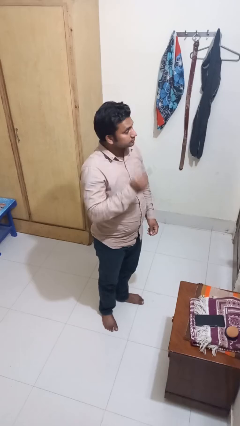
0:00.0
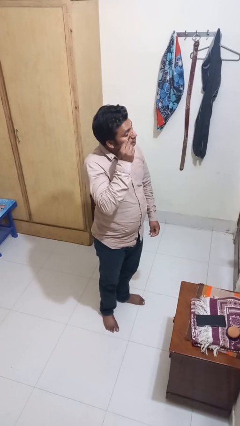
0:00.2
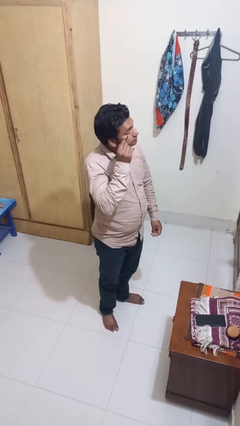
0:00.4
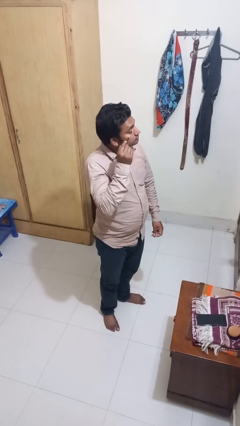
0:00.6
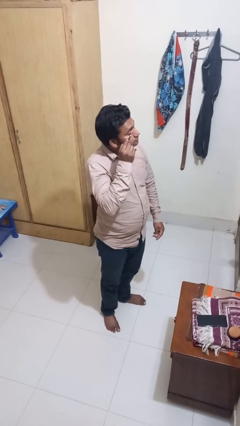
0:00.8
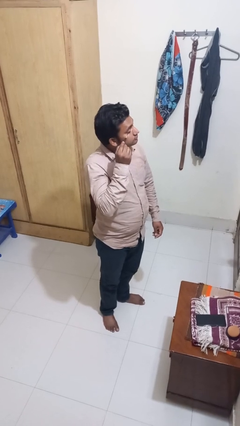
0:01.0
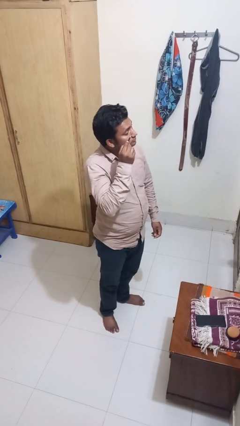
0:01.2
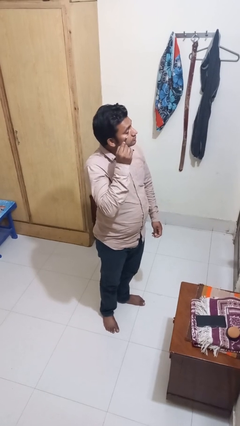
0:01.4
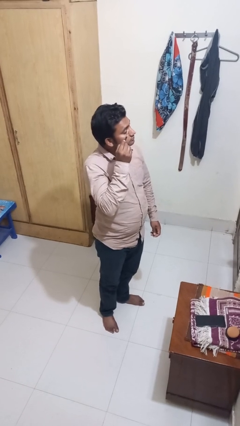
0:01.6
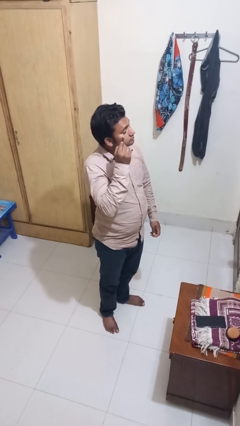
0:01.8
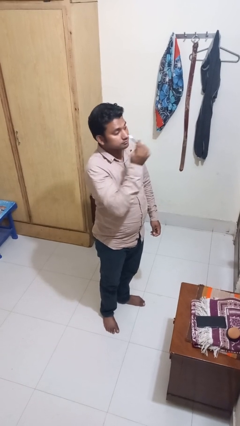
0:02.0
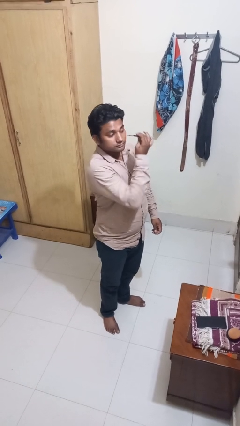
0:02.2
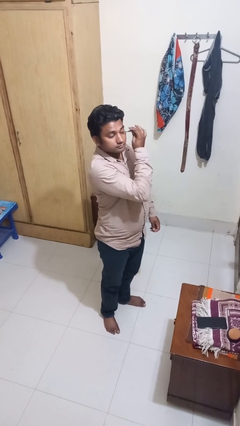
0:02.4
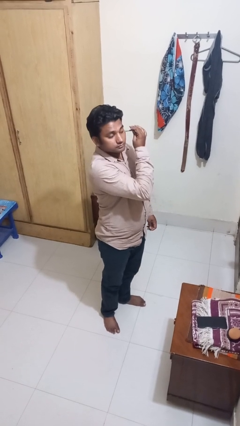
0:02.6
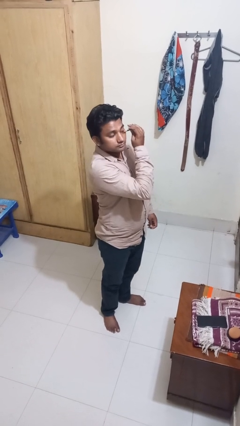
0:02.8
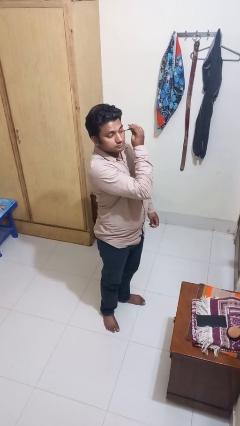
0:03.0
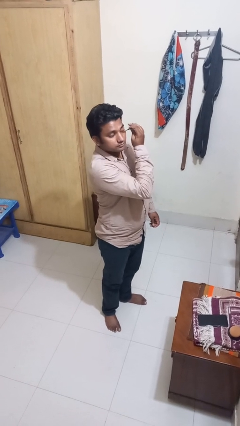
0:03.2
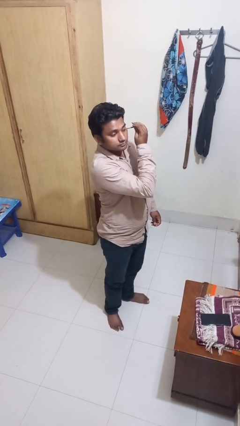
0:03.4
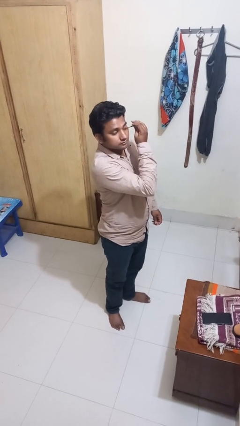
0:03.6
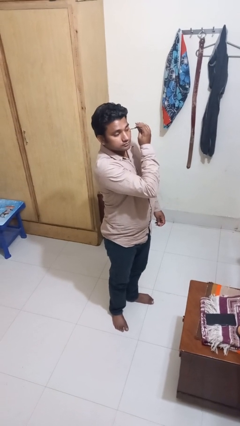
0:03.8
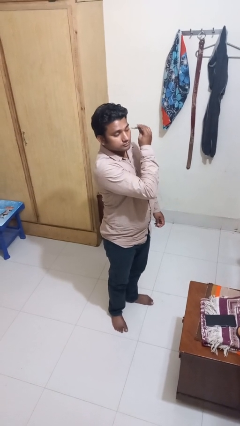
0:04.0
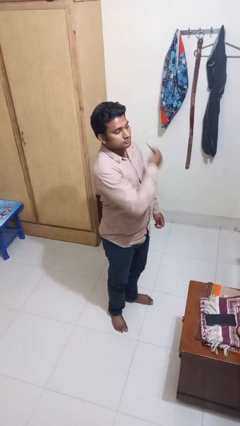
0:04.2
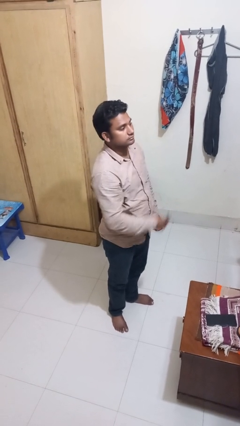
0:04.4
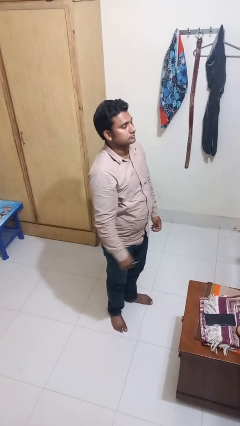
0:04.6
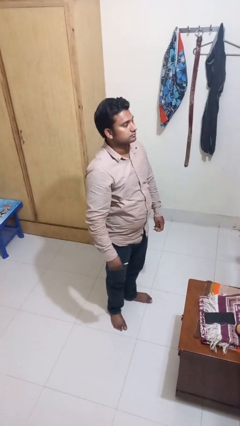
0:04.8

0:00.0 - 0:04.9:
person applies eye makeup

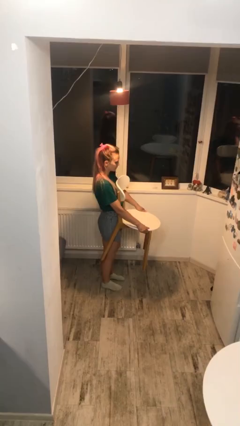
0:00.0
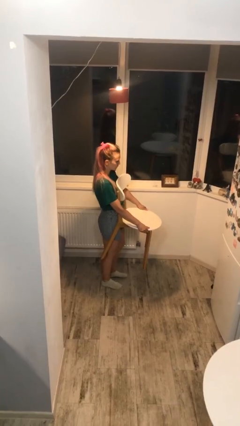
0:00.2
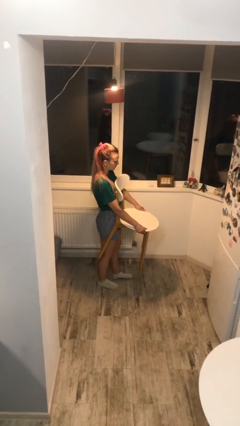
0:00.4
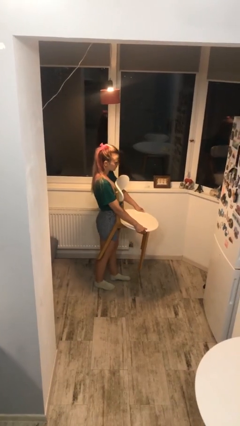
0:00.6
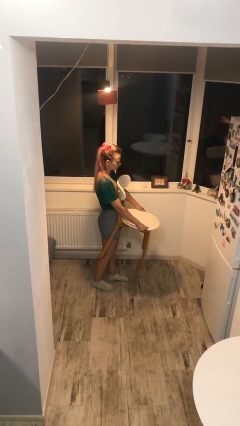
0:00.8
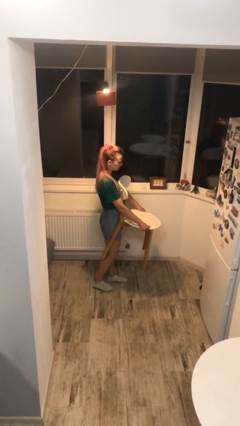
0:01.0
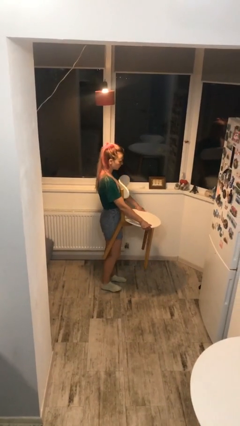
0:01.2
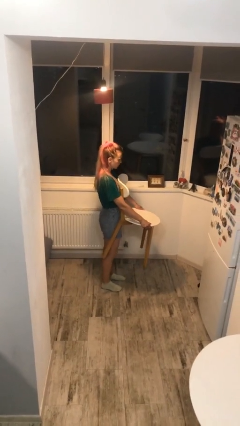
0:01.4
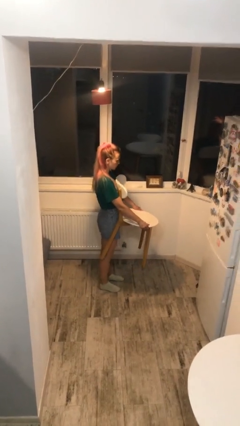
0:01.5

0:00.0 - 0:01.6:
person carries furniture

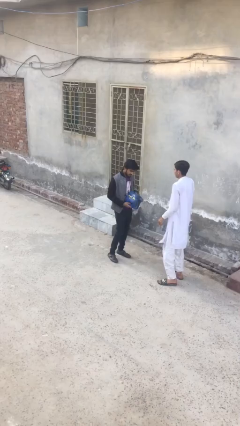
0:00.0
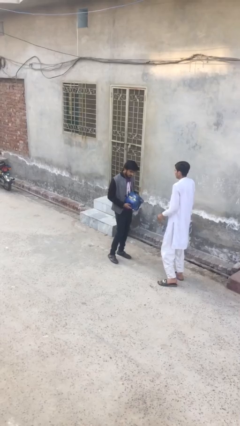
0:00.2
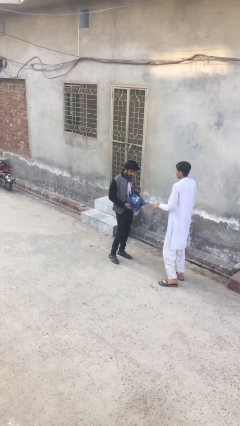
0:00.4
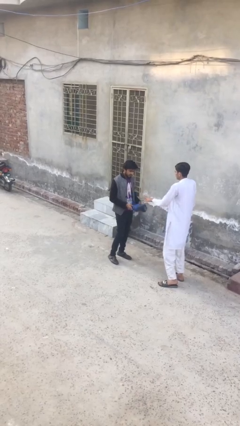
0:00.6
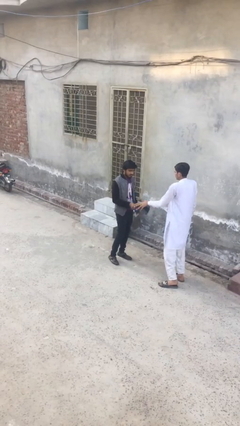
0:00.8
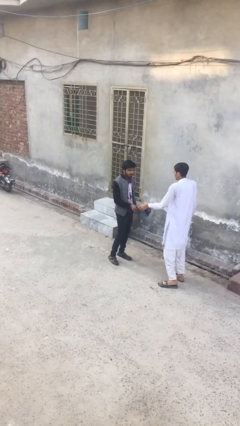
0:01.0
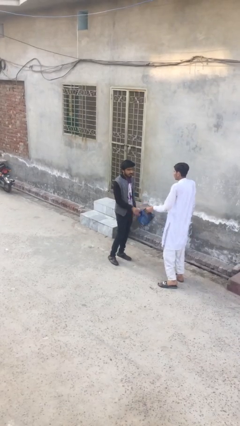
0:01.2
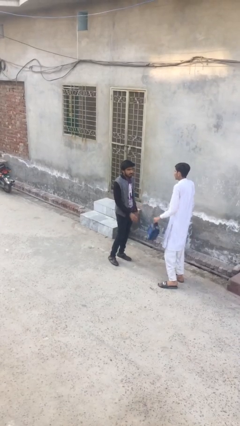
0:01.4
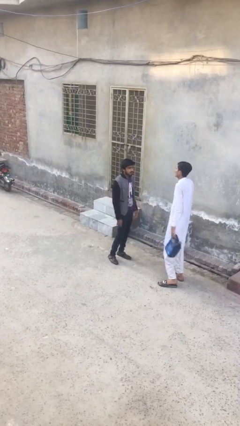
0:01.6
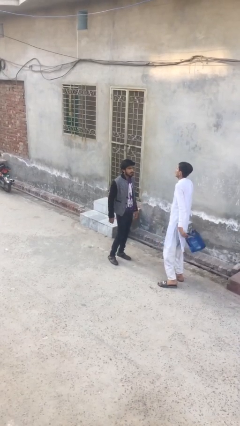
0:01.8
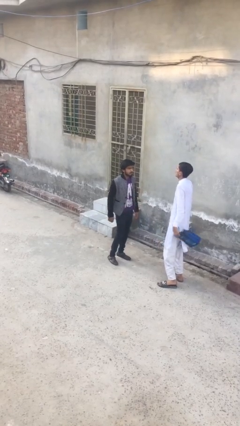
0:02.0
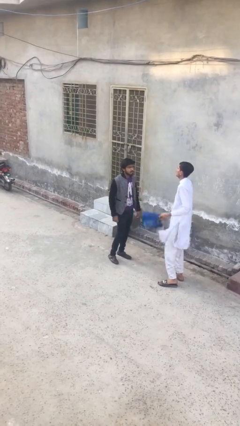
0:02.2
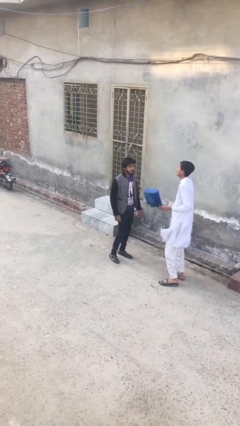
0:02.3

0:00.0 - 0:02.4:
person transfers object to person

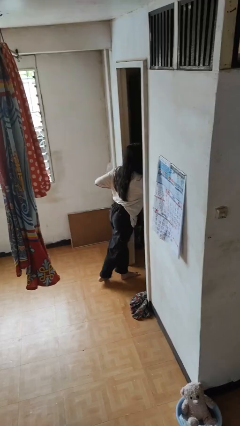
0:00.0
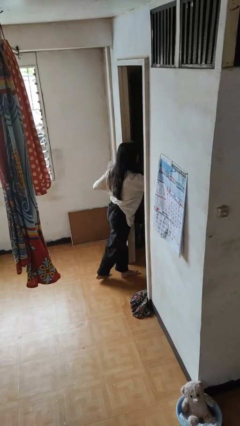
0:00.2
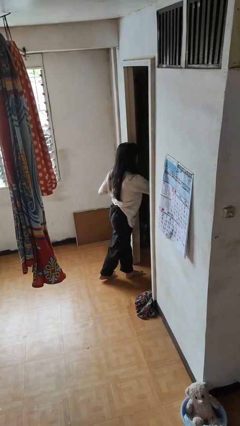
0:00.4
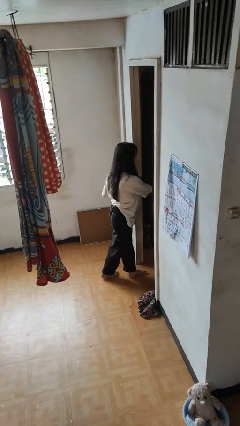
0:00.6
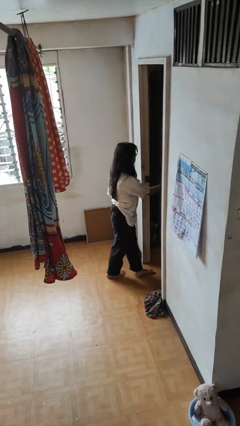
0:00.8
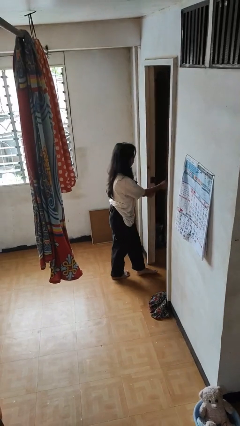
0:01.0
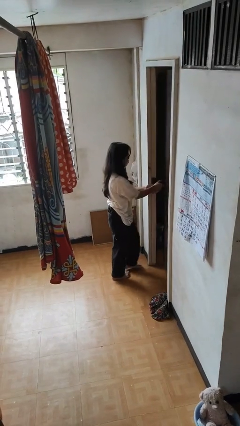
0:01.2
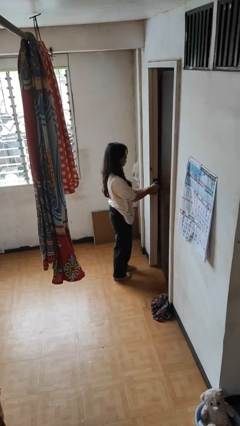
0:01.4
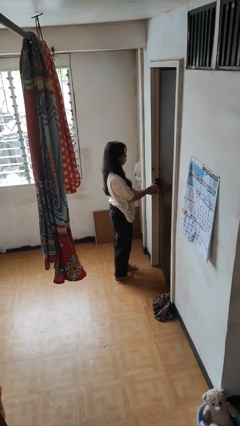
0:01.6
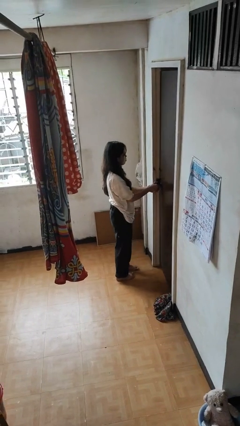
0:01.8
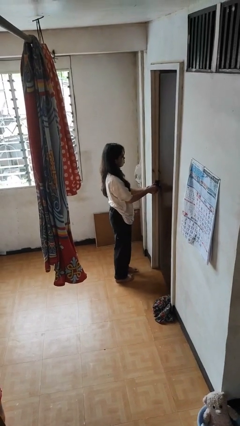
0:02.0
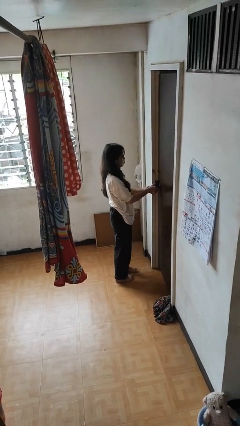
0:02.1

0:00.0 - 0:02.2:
person closes facility door

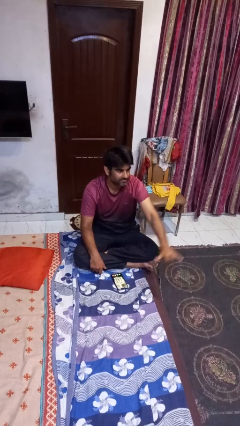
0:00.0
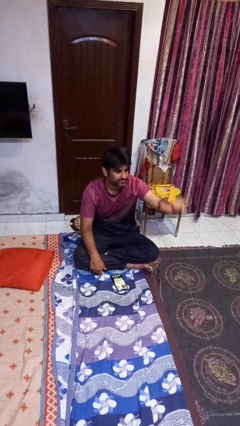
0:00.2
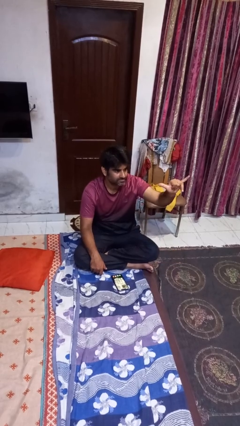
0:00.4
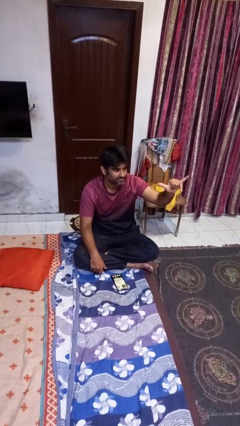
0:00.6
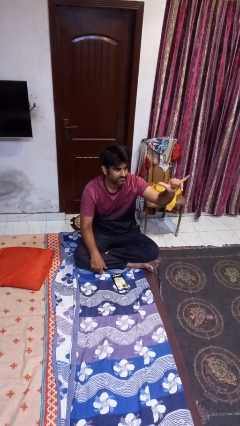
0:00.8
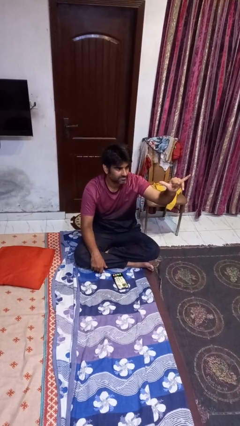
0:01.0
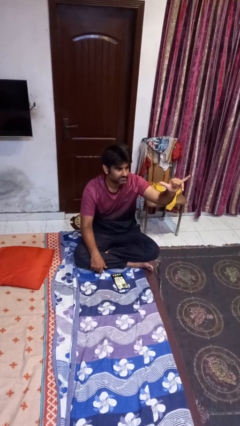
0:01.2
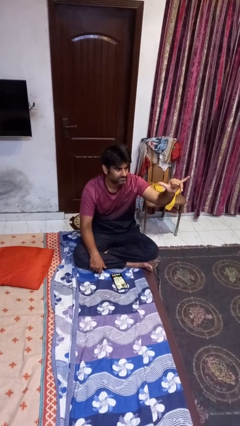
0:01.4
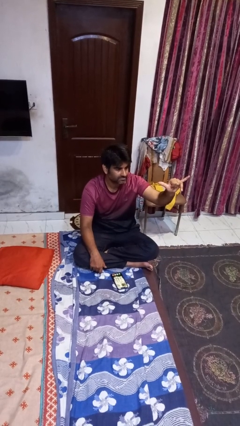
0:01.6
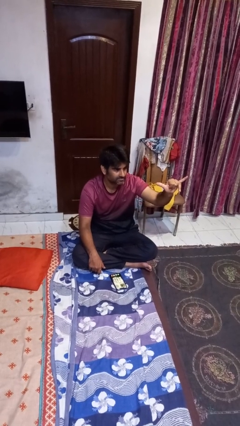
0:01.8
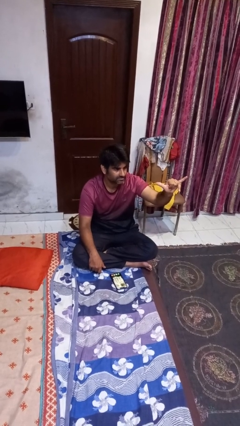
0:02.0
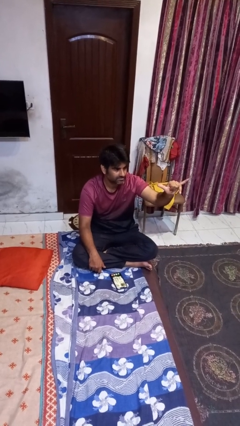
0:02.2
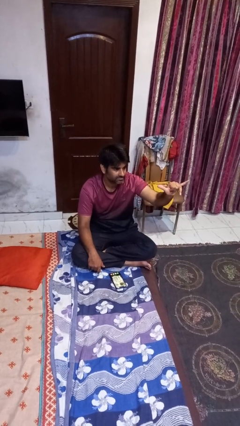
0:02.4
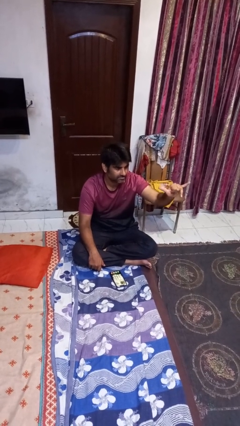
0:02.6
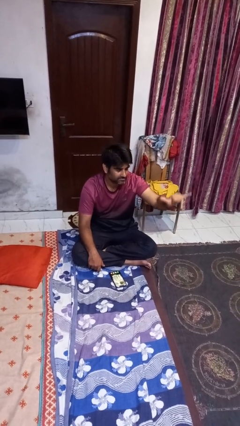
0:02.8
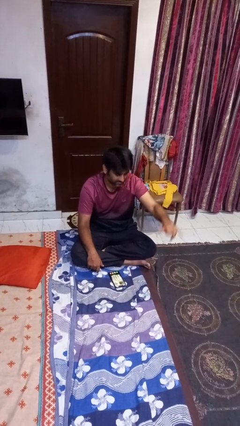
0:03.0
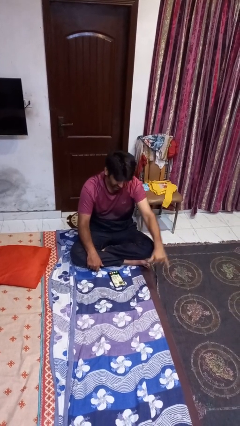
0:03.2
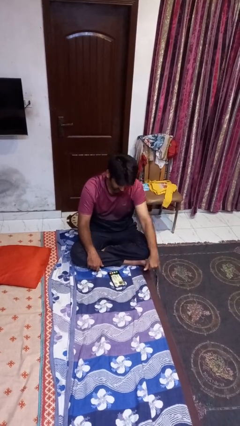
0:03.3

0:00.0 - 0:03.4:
person gestures hang loose

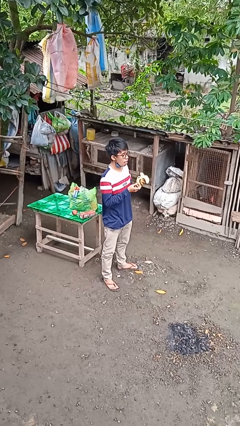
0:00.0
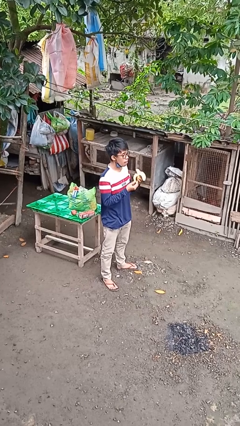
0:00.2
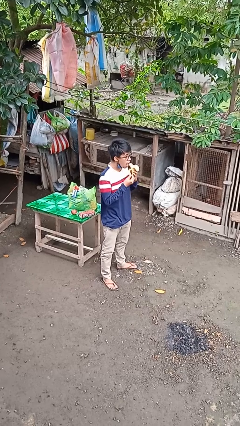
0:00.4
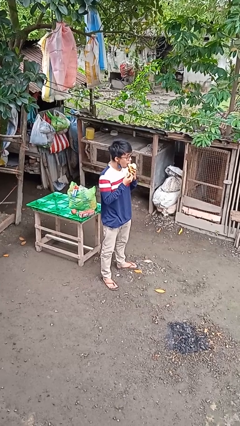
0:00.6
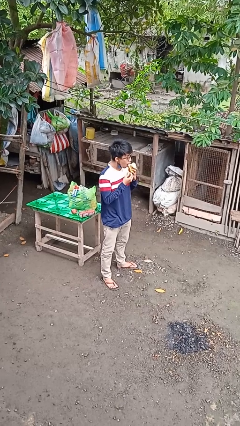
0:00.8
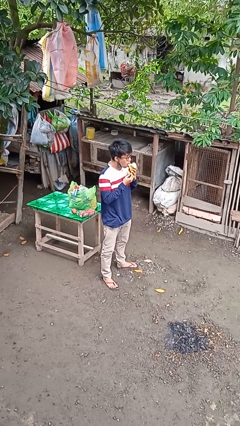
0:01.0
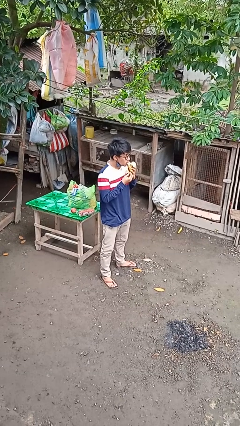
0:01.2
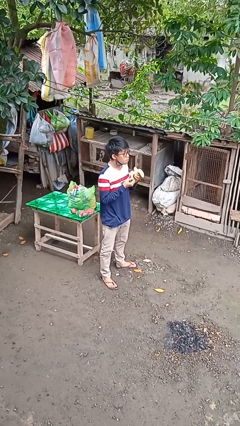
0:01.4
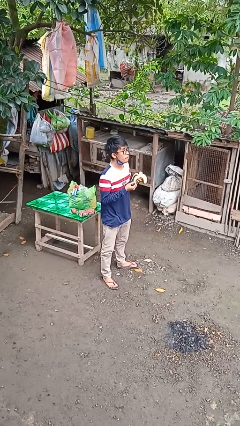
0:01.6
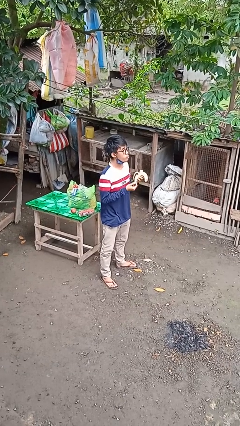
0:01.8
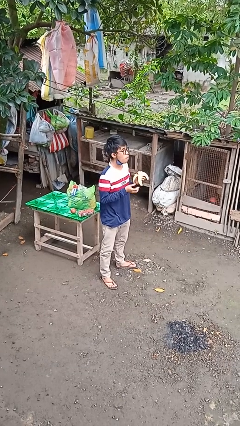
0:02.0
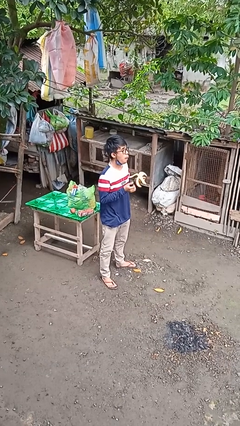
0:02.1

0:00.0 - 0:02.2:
person eats banana

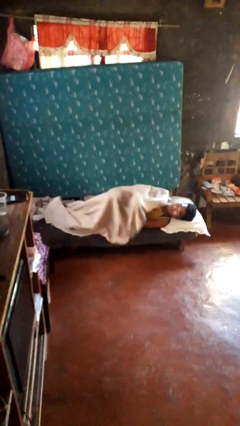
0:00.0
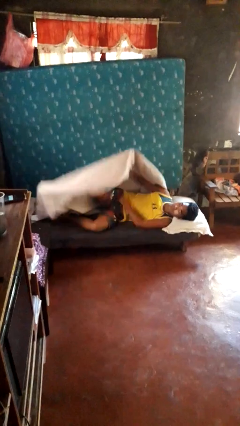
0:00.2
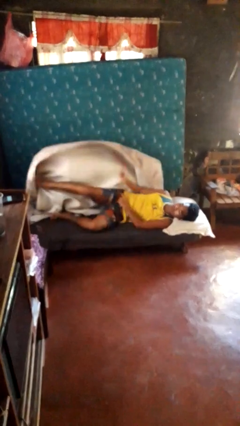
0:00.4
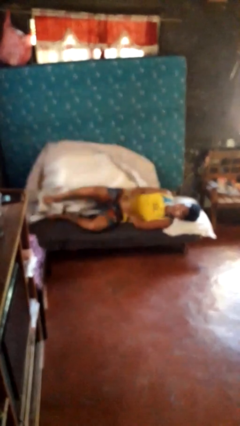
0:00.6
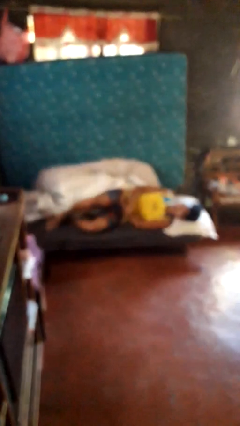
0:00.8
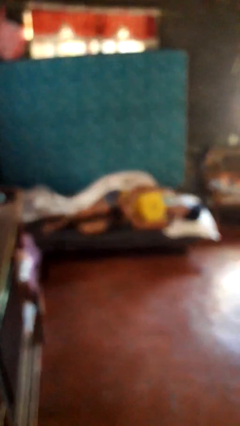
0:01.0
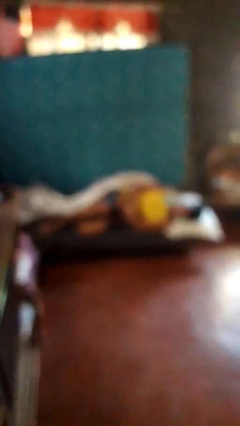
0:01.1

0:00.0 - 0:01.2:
person uncovers with bedsheets
